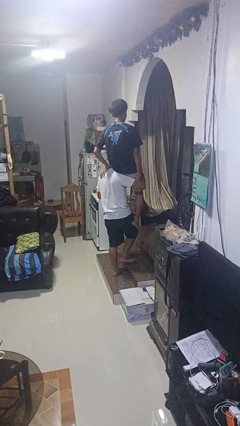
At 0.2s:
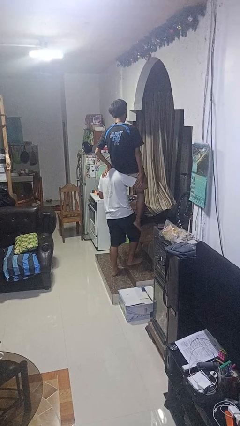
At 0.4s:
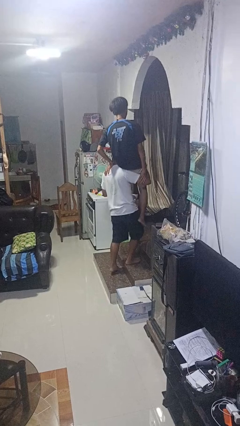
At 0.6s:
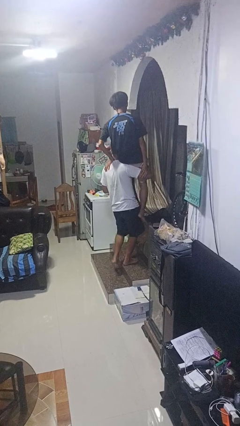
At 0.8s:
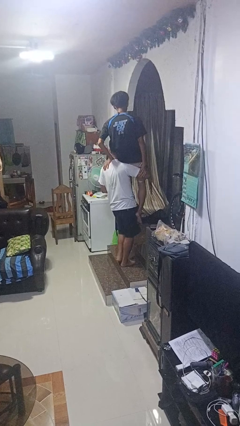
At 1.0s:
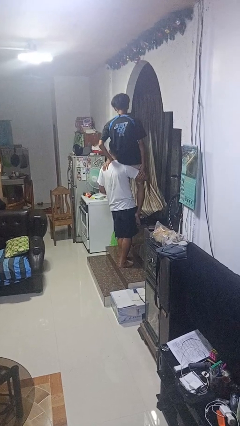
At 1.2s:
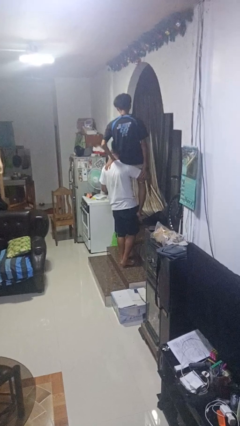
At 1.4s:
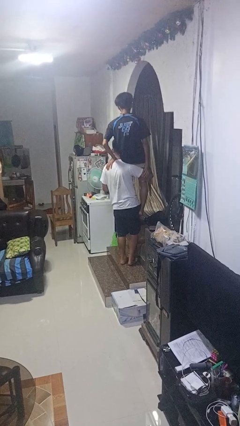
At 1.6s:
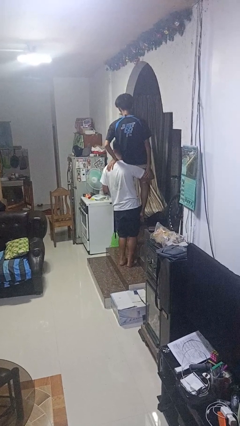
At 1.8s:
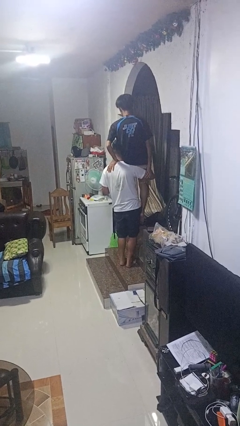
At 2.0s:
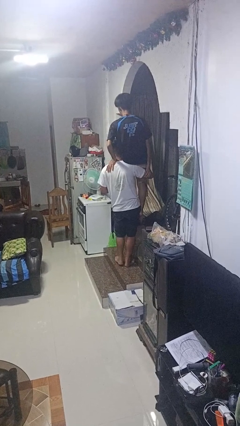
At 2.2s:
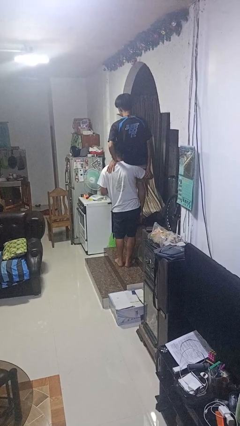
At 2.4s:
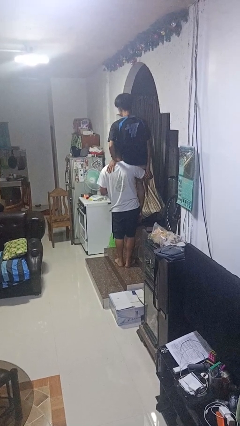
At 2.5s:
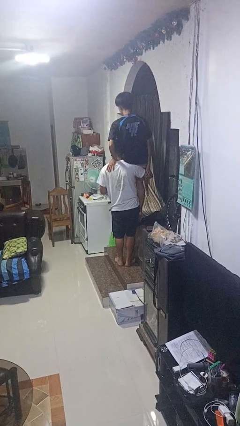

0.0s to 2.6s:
person carries person on shoulders

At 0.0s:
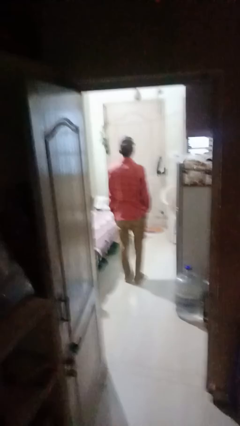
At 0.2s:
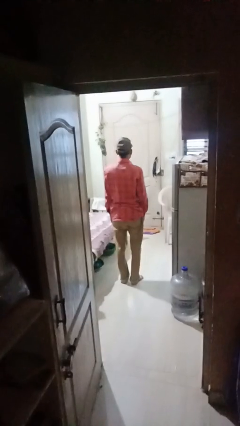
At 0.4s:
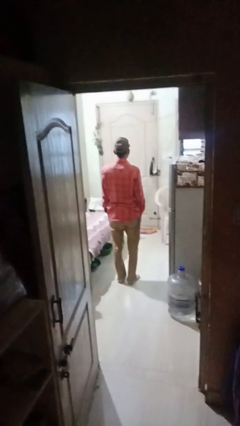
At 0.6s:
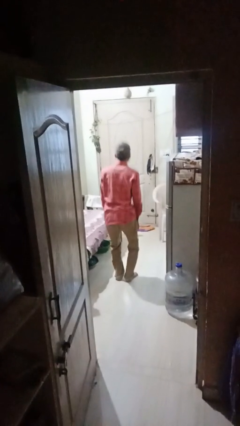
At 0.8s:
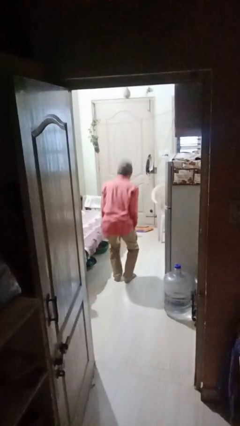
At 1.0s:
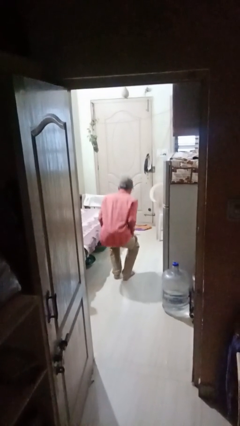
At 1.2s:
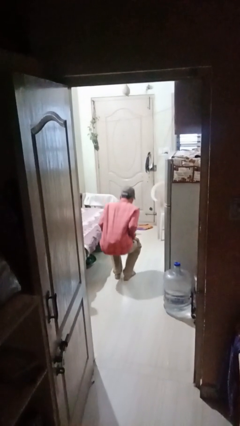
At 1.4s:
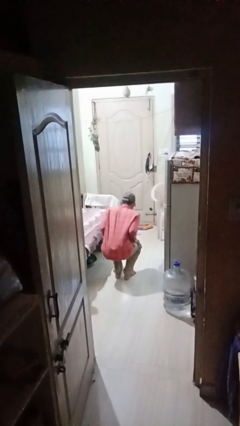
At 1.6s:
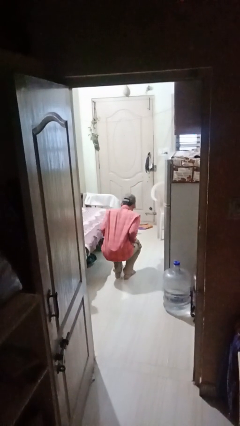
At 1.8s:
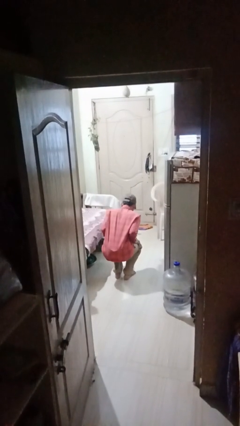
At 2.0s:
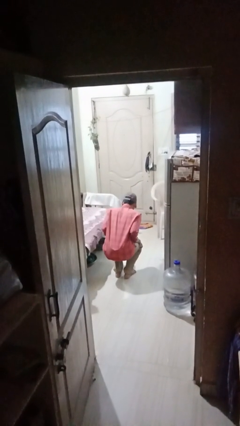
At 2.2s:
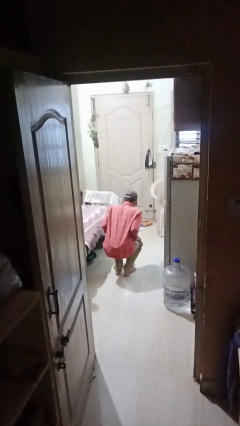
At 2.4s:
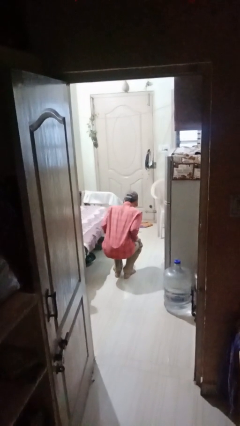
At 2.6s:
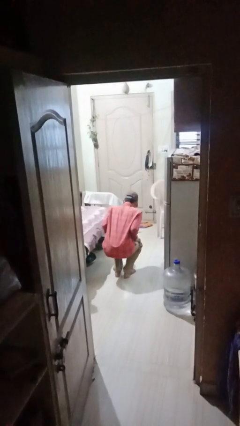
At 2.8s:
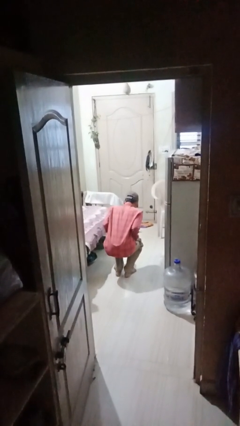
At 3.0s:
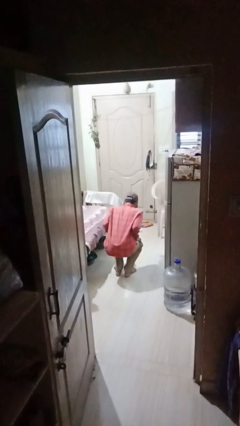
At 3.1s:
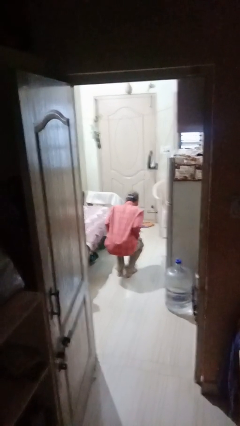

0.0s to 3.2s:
person squats

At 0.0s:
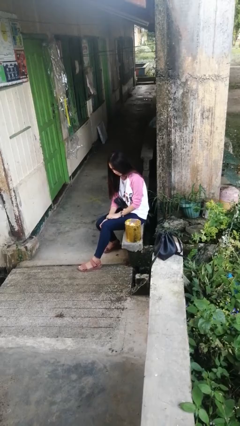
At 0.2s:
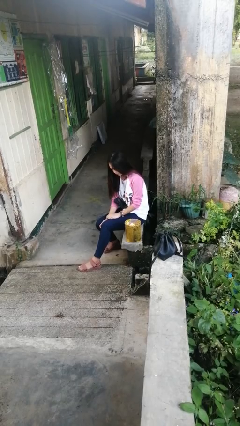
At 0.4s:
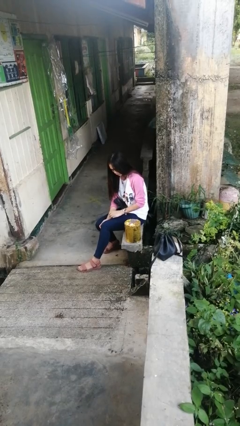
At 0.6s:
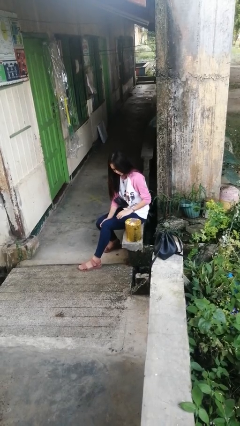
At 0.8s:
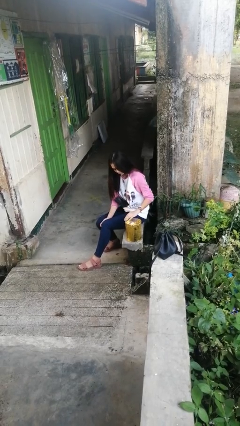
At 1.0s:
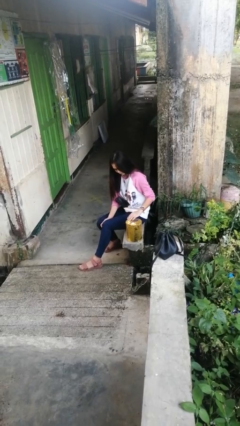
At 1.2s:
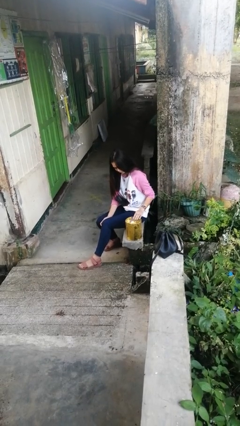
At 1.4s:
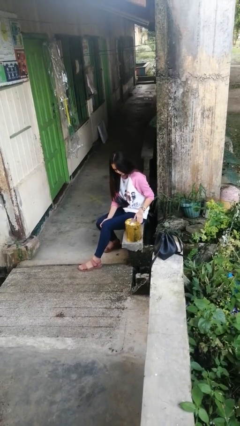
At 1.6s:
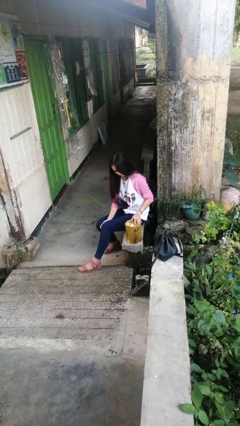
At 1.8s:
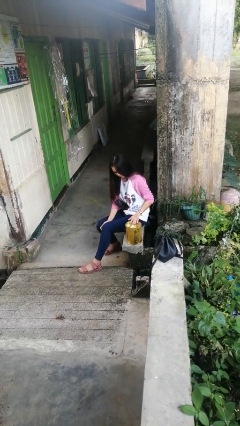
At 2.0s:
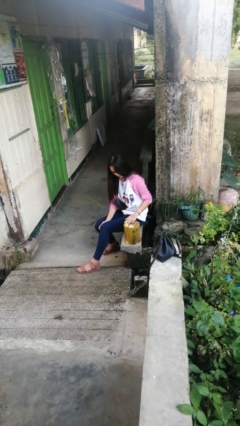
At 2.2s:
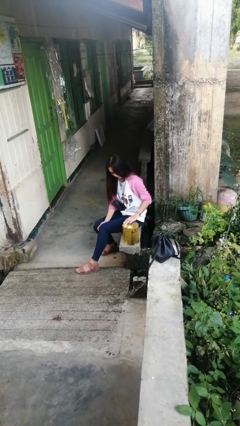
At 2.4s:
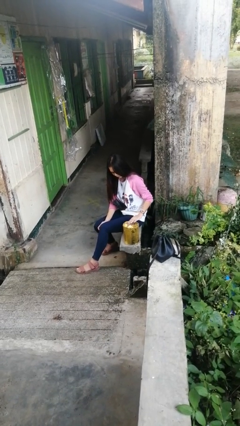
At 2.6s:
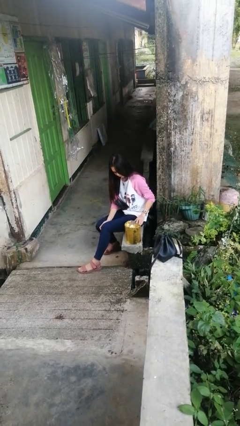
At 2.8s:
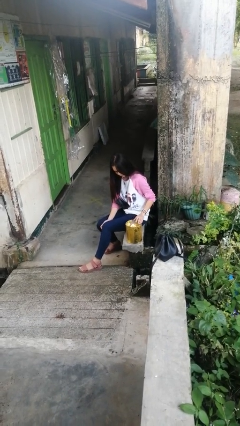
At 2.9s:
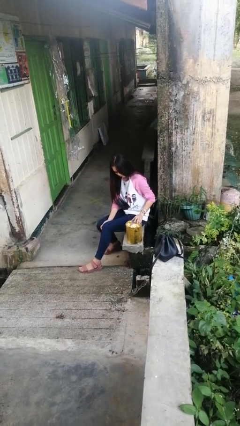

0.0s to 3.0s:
person waves hand over object

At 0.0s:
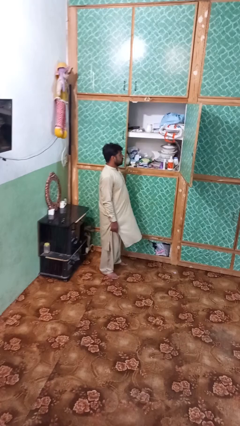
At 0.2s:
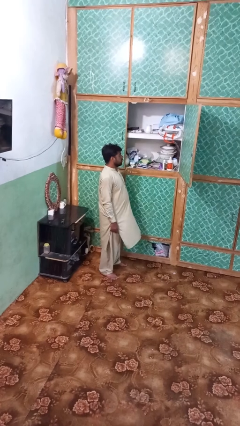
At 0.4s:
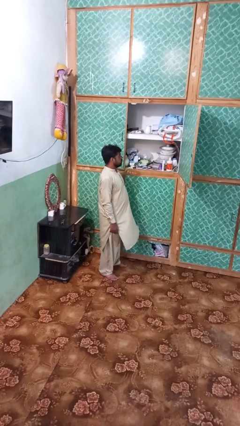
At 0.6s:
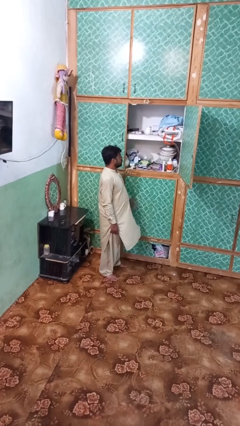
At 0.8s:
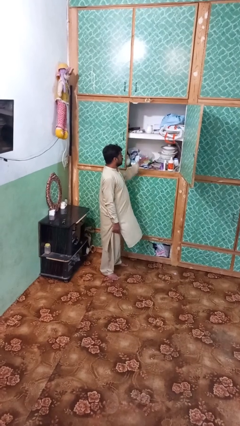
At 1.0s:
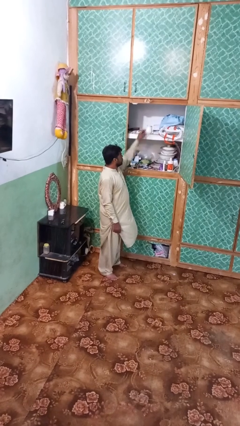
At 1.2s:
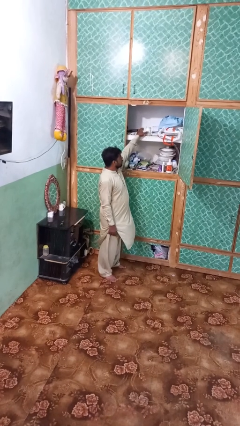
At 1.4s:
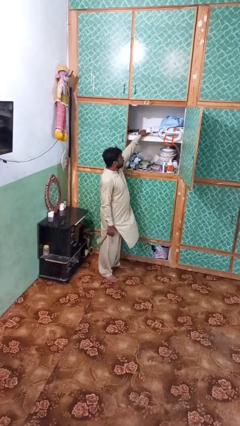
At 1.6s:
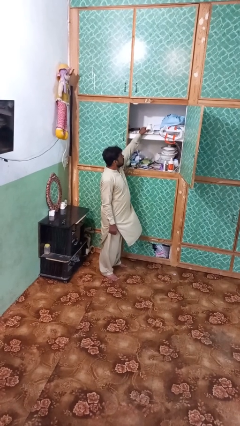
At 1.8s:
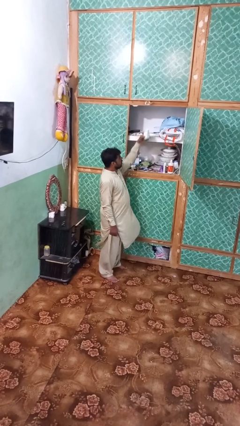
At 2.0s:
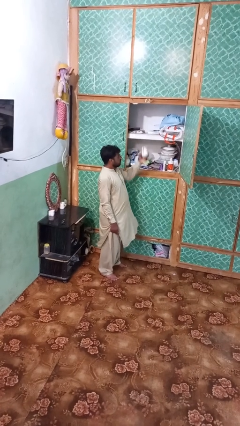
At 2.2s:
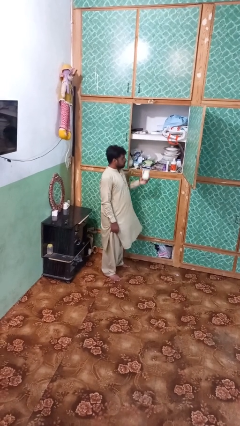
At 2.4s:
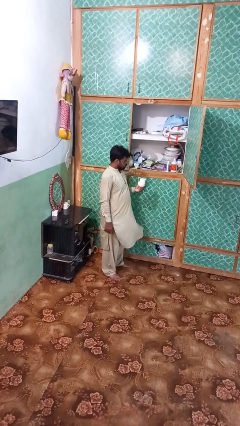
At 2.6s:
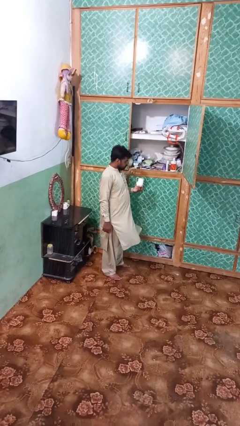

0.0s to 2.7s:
person picks up object from shelf

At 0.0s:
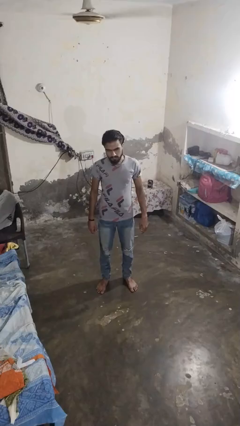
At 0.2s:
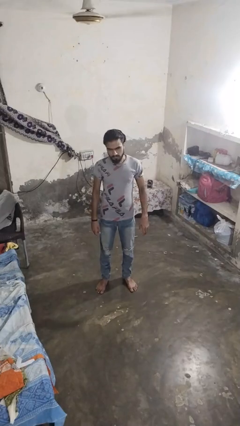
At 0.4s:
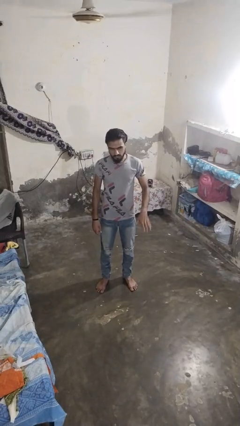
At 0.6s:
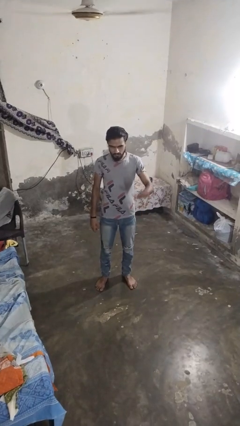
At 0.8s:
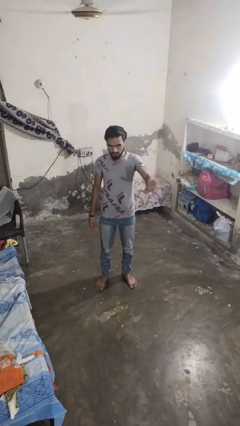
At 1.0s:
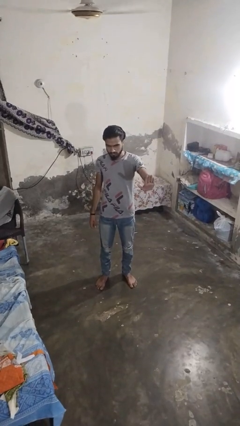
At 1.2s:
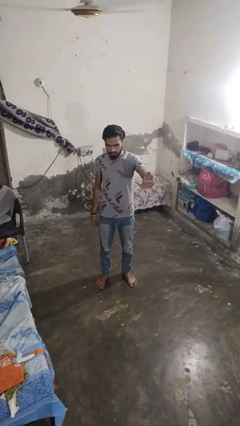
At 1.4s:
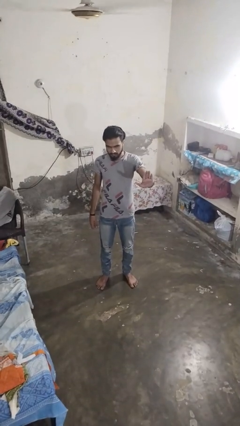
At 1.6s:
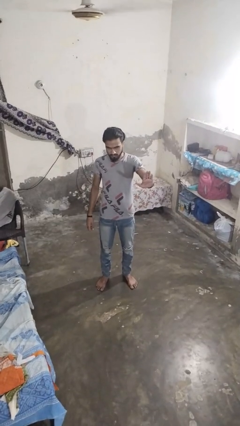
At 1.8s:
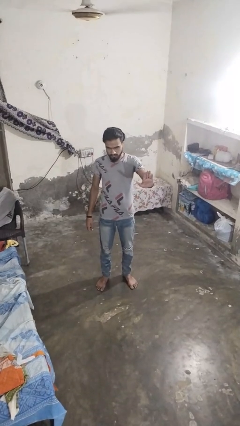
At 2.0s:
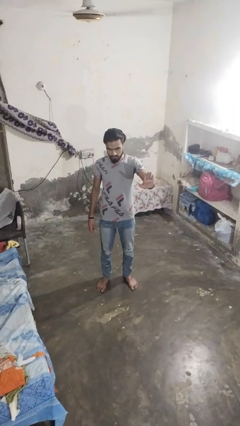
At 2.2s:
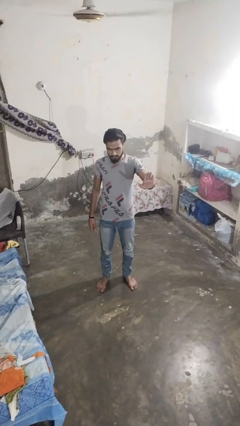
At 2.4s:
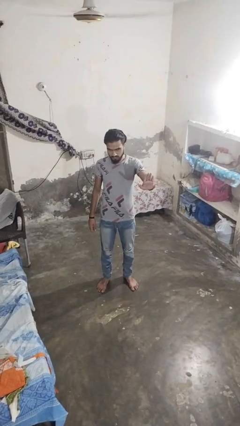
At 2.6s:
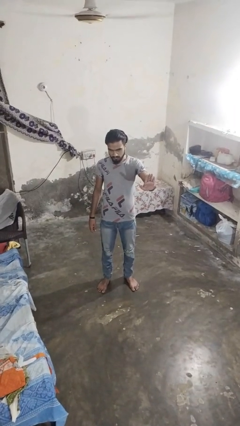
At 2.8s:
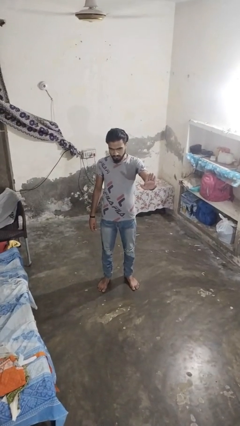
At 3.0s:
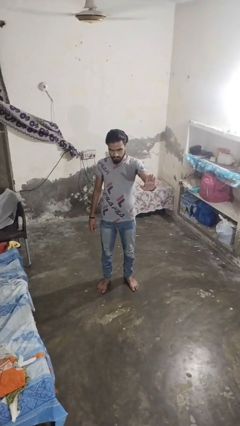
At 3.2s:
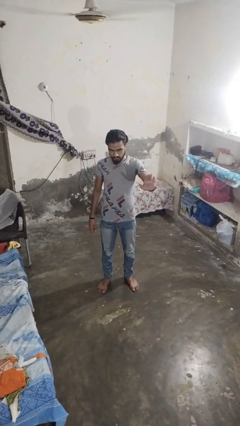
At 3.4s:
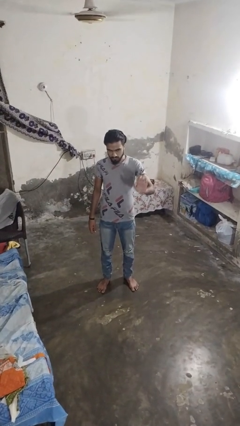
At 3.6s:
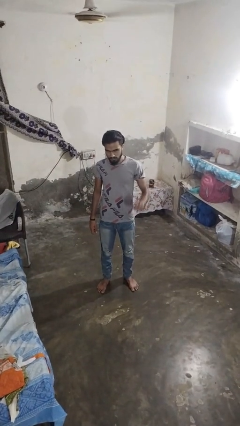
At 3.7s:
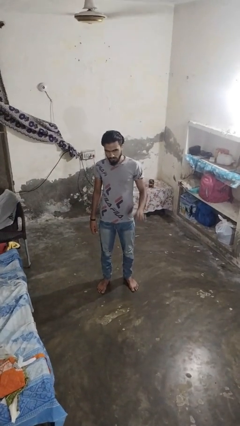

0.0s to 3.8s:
person gestures stop

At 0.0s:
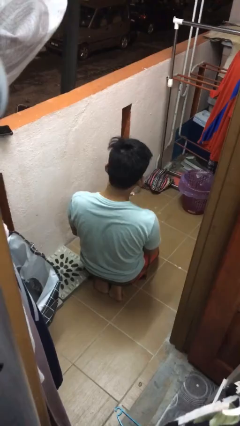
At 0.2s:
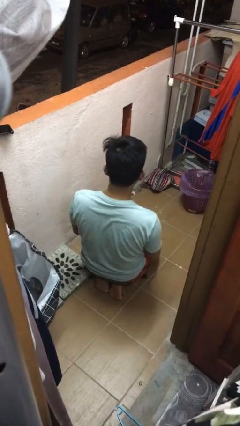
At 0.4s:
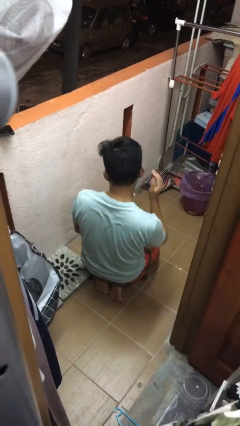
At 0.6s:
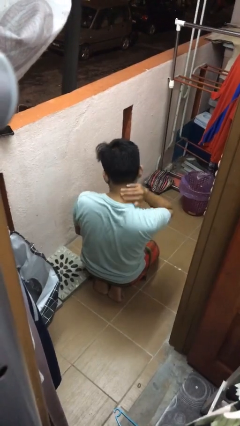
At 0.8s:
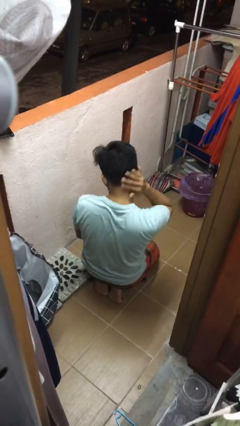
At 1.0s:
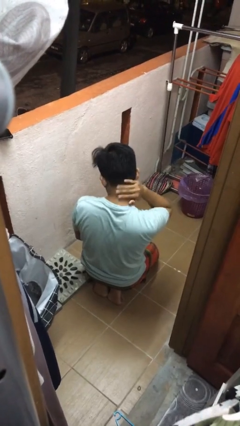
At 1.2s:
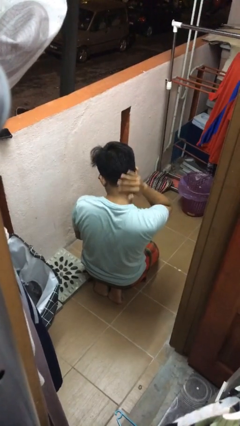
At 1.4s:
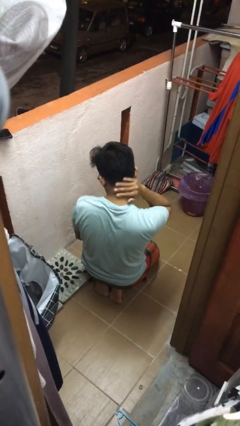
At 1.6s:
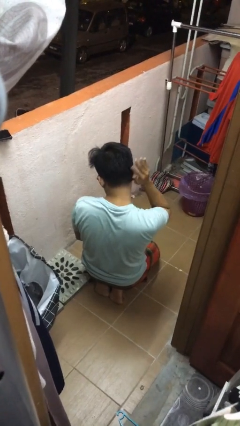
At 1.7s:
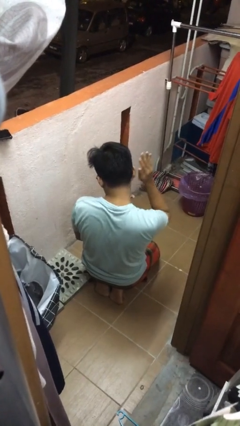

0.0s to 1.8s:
person rubs neck

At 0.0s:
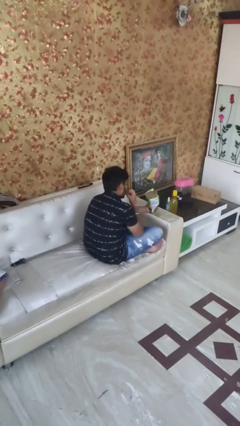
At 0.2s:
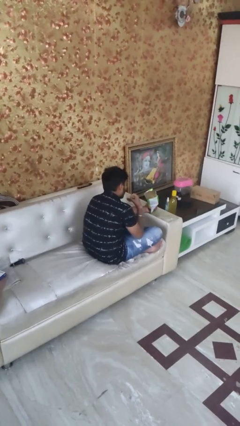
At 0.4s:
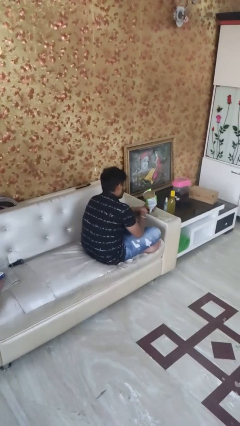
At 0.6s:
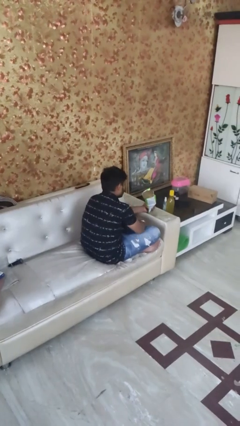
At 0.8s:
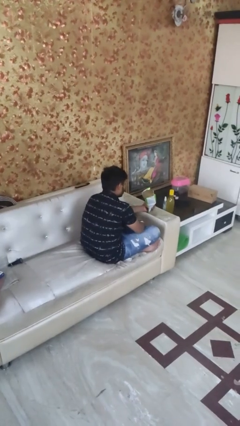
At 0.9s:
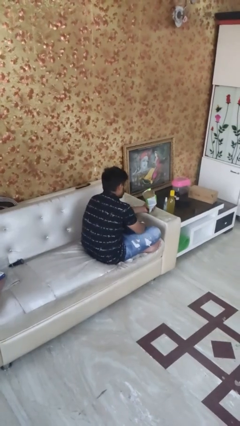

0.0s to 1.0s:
person eats snack from bag
